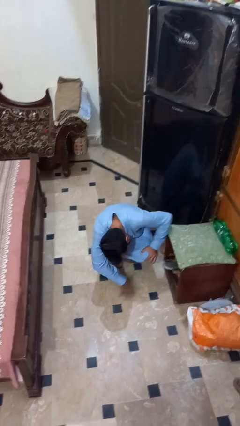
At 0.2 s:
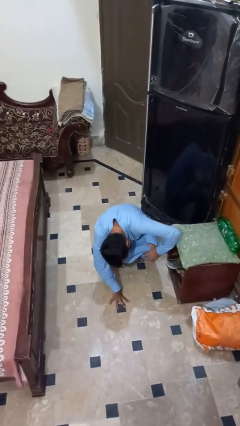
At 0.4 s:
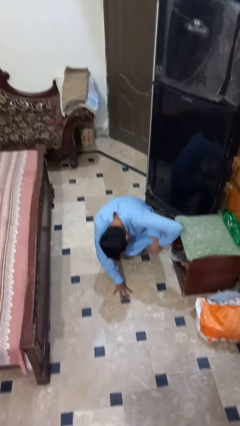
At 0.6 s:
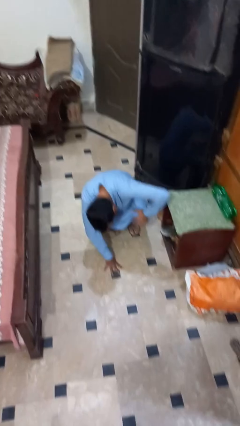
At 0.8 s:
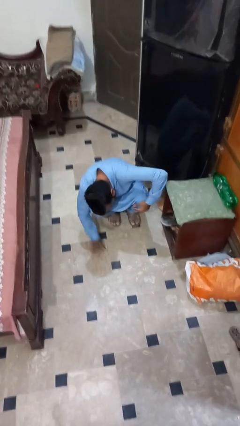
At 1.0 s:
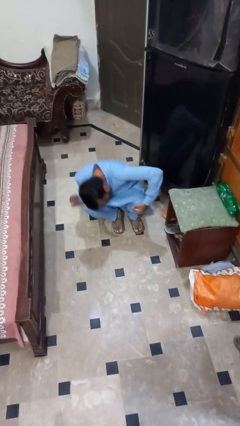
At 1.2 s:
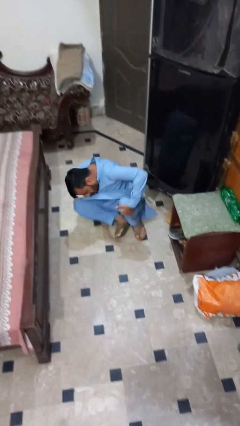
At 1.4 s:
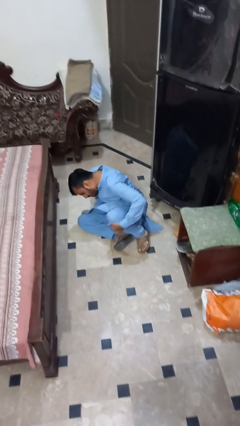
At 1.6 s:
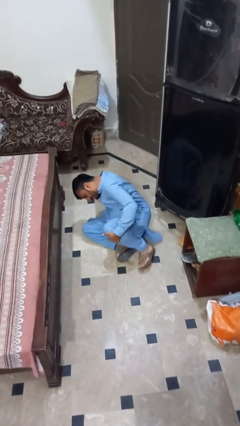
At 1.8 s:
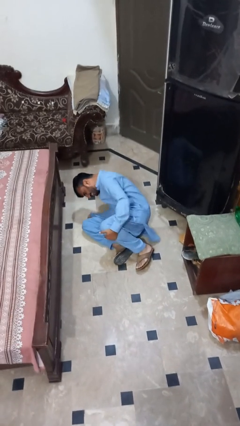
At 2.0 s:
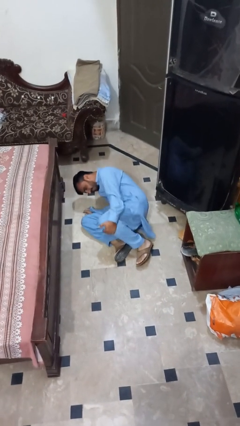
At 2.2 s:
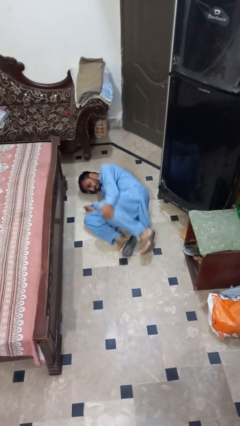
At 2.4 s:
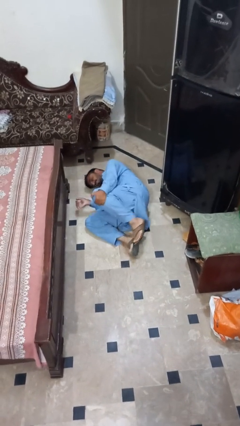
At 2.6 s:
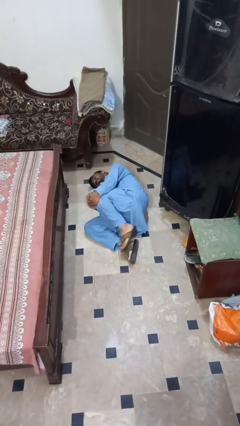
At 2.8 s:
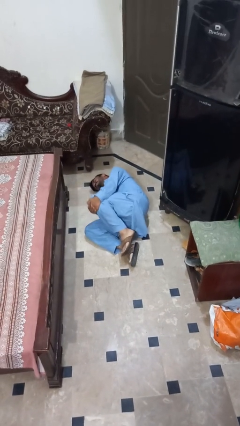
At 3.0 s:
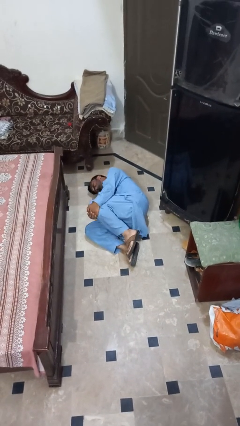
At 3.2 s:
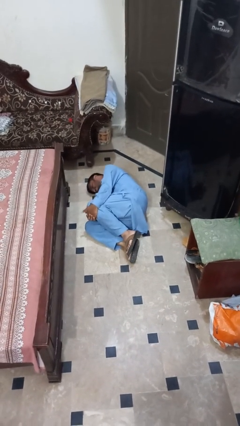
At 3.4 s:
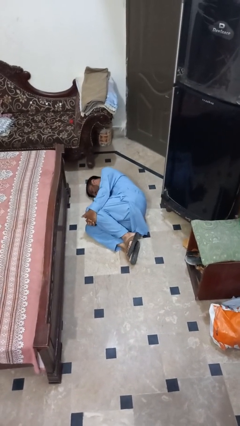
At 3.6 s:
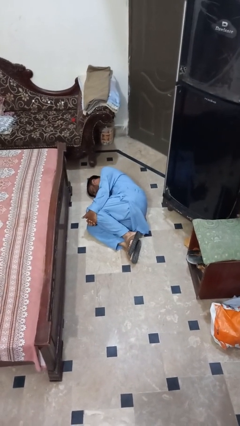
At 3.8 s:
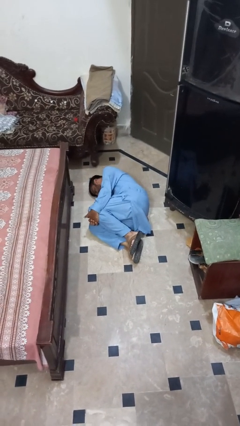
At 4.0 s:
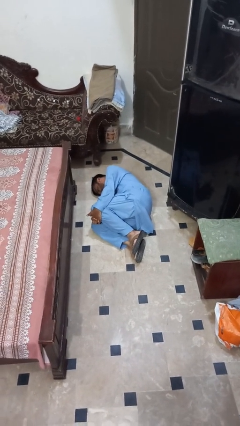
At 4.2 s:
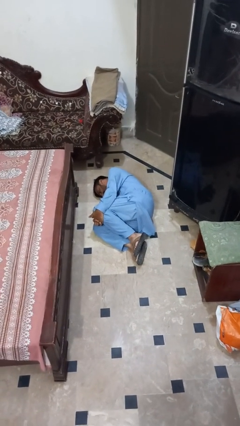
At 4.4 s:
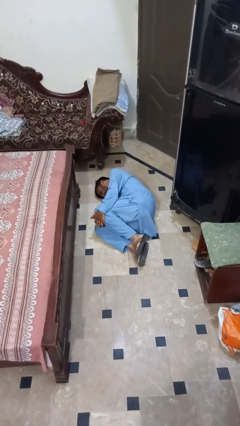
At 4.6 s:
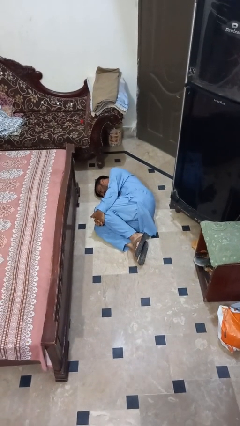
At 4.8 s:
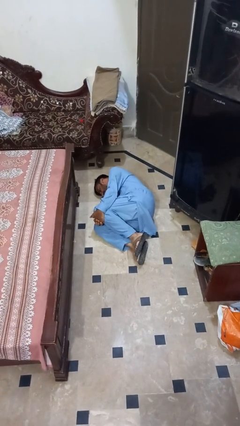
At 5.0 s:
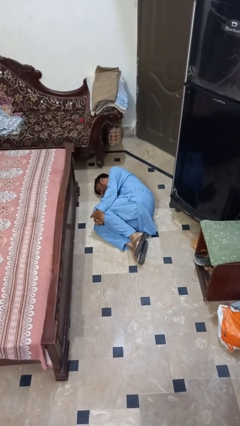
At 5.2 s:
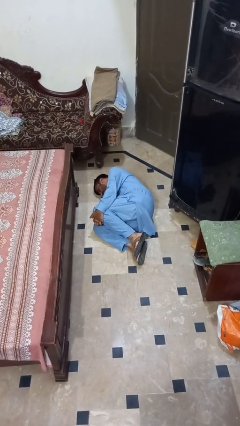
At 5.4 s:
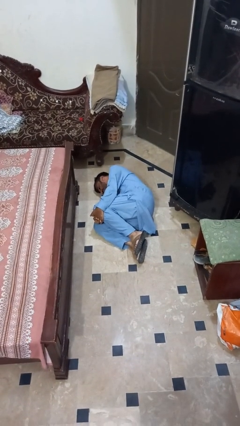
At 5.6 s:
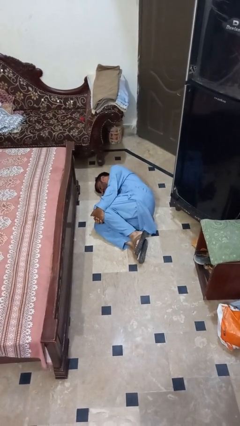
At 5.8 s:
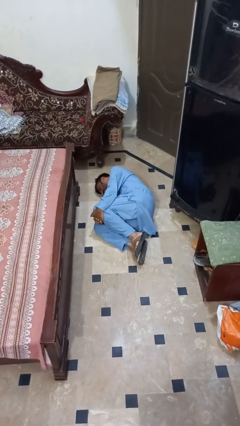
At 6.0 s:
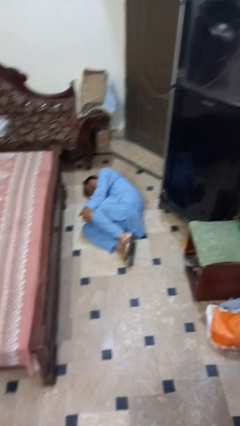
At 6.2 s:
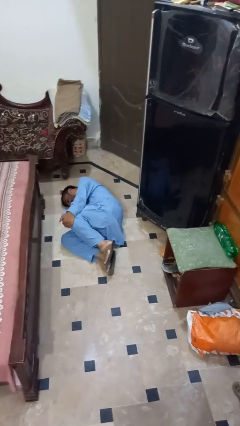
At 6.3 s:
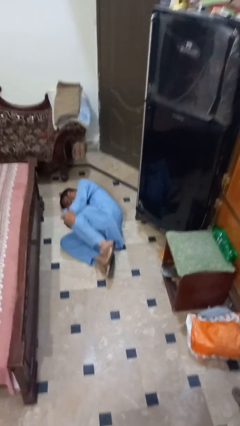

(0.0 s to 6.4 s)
person lies down on floor

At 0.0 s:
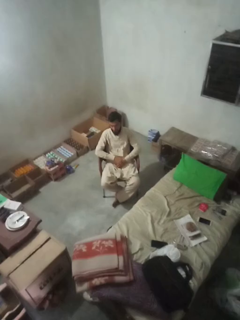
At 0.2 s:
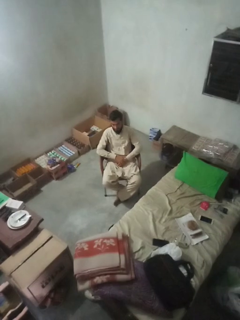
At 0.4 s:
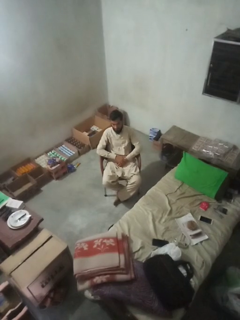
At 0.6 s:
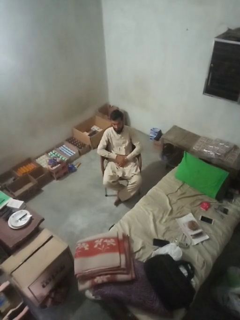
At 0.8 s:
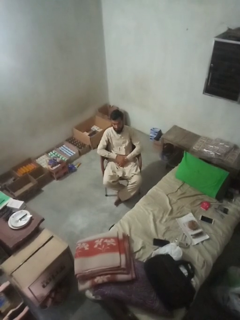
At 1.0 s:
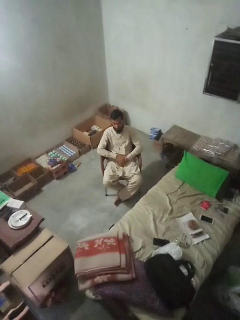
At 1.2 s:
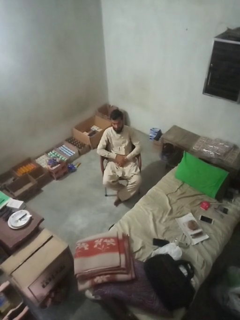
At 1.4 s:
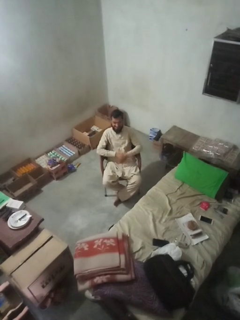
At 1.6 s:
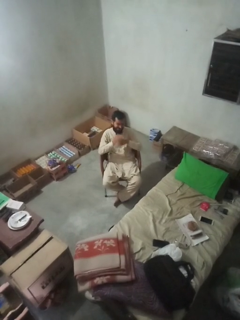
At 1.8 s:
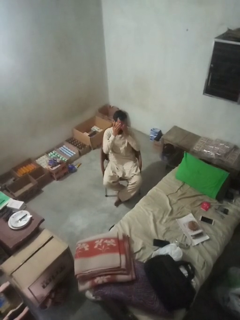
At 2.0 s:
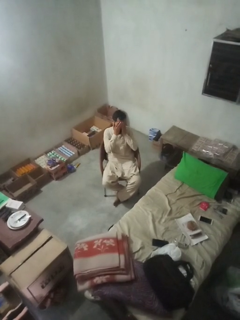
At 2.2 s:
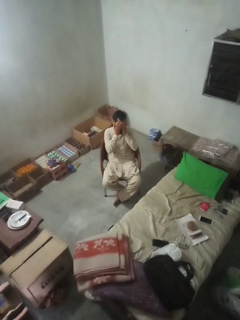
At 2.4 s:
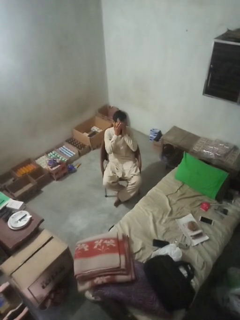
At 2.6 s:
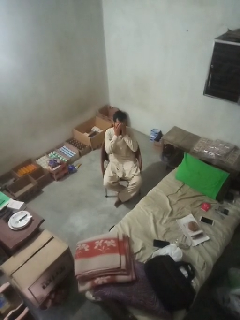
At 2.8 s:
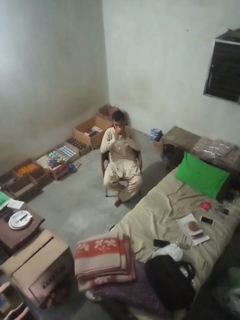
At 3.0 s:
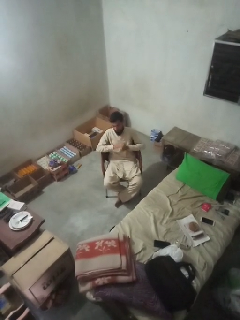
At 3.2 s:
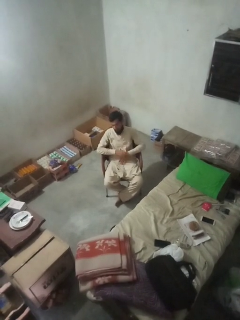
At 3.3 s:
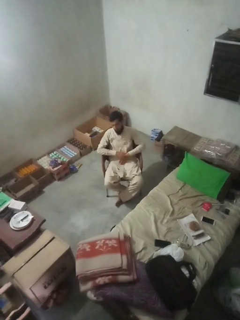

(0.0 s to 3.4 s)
person covers face with hands

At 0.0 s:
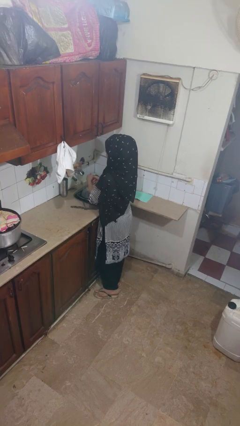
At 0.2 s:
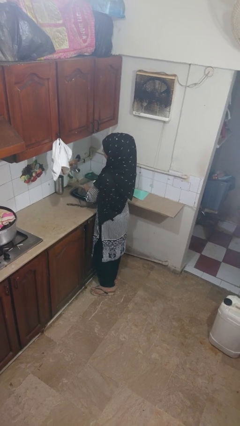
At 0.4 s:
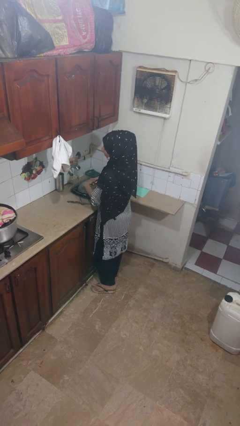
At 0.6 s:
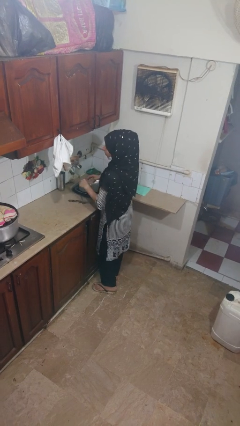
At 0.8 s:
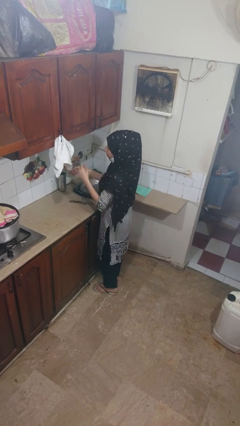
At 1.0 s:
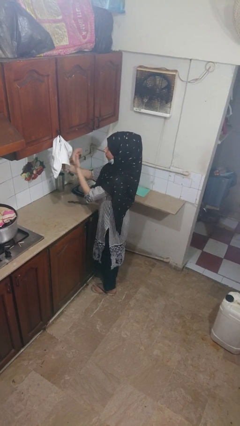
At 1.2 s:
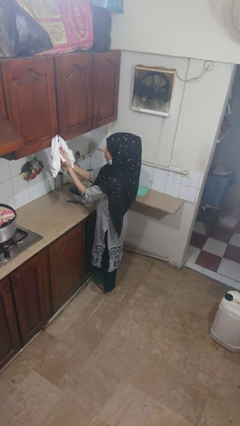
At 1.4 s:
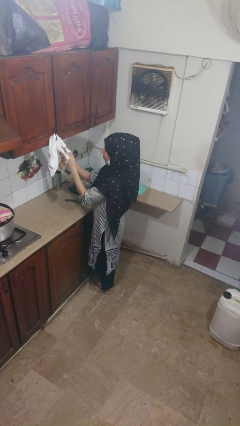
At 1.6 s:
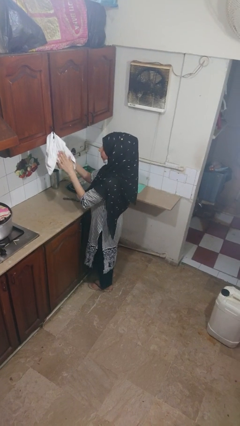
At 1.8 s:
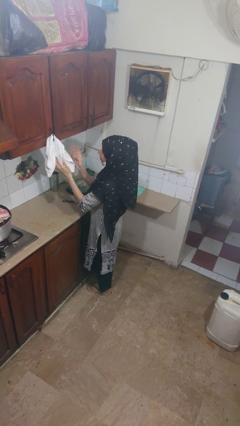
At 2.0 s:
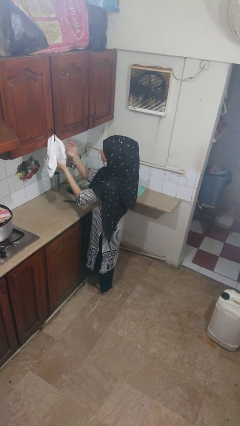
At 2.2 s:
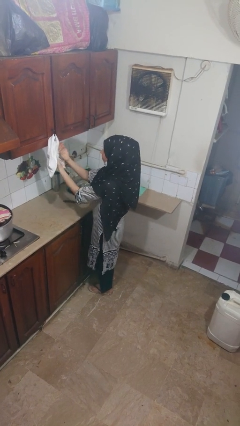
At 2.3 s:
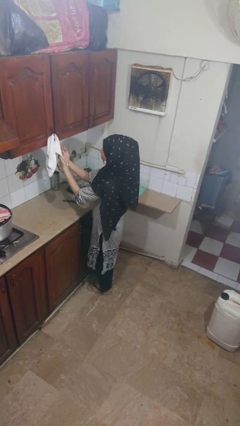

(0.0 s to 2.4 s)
person dries hands with towel

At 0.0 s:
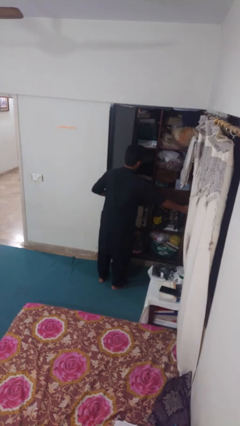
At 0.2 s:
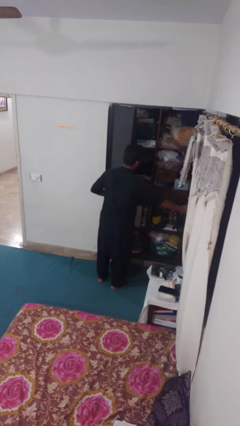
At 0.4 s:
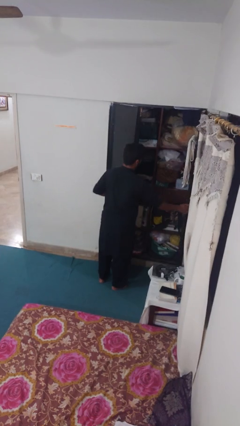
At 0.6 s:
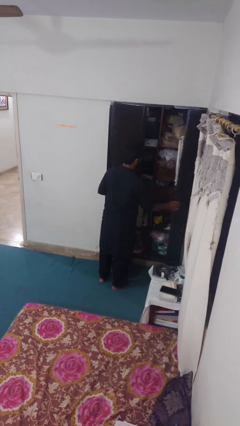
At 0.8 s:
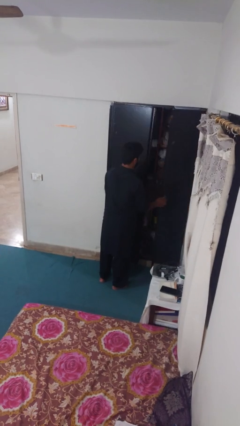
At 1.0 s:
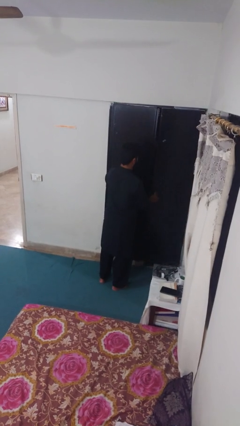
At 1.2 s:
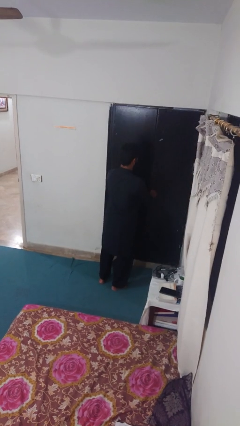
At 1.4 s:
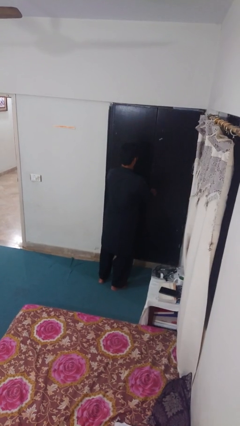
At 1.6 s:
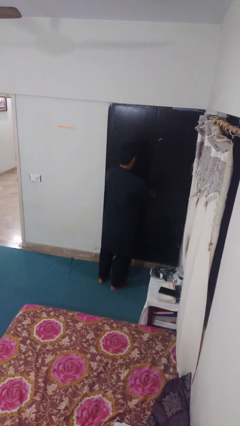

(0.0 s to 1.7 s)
person closes closet door

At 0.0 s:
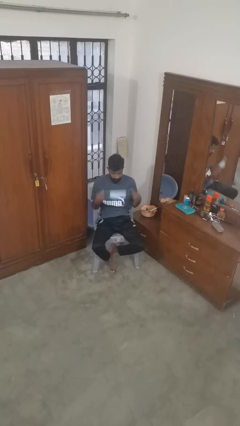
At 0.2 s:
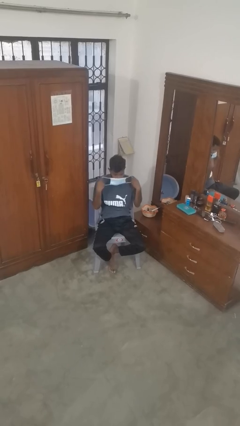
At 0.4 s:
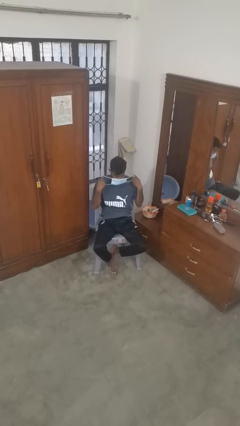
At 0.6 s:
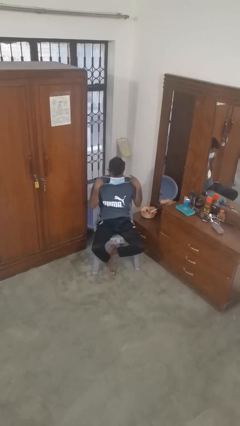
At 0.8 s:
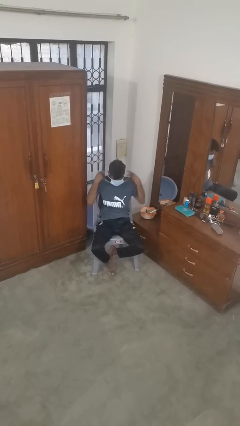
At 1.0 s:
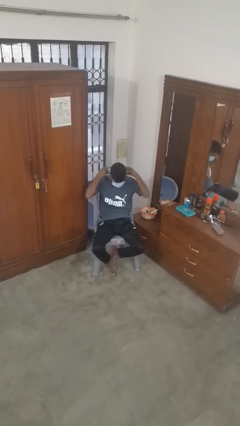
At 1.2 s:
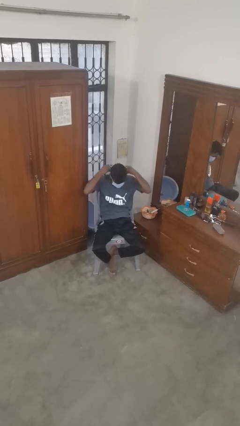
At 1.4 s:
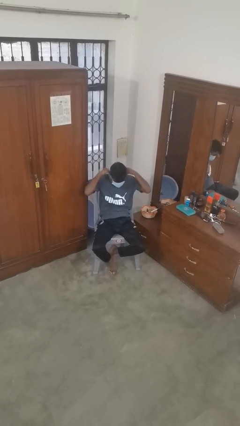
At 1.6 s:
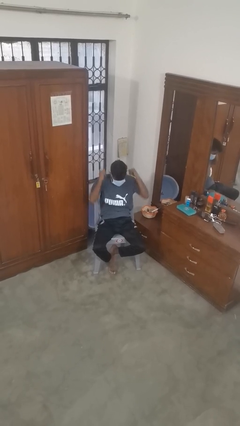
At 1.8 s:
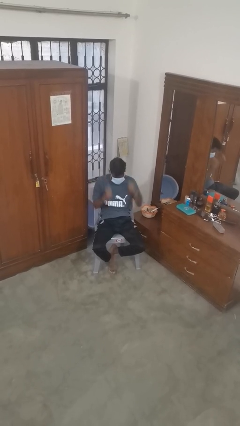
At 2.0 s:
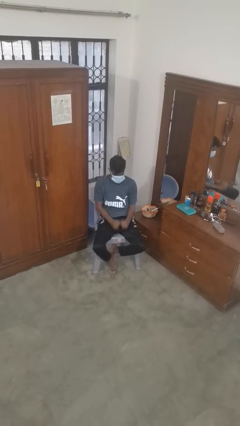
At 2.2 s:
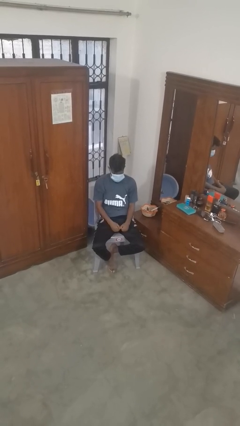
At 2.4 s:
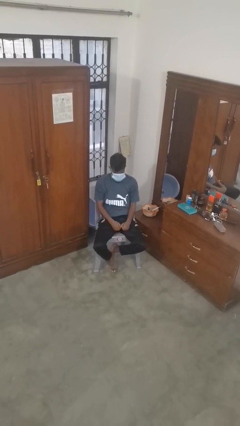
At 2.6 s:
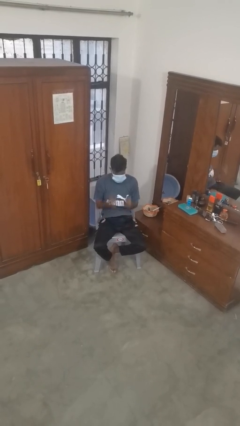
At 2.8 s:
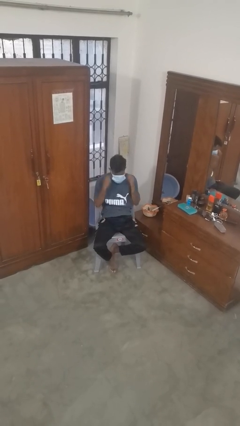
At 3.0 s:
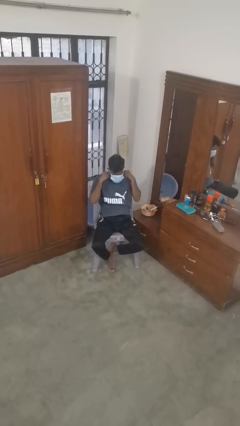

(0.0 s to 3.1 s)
person puts on facemask

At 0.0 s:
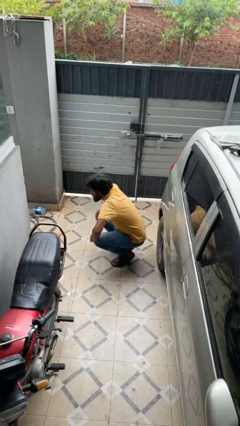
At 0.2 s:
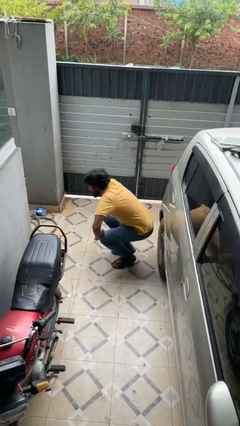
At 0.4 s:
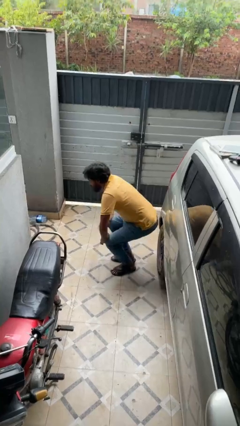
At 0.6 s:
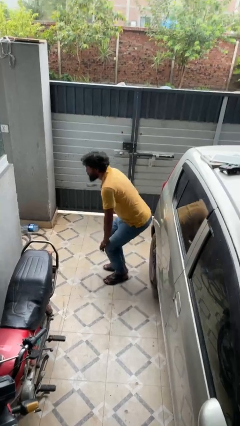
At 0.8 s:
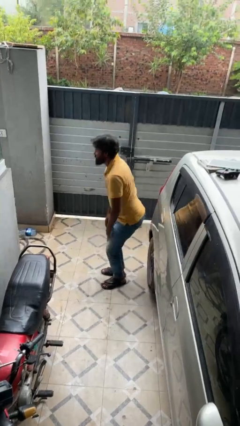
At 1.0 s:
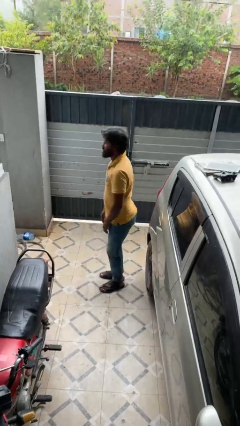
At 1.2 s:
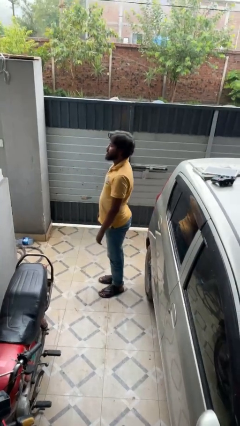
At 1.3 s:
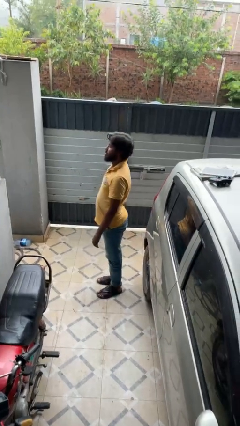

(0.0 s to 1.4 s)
person stands up
